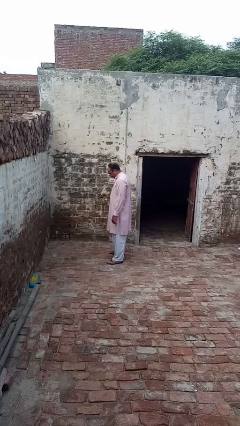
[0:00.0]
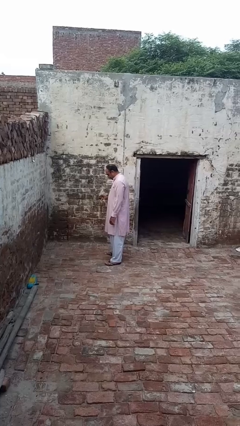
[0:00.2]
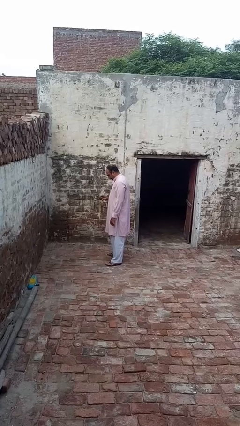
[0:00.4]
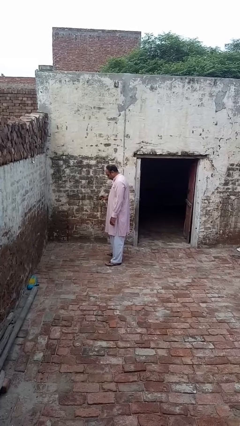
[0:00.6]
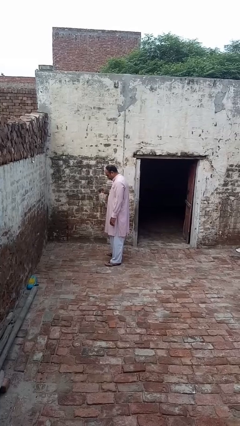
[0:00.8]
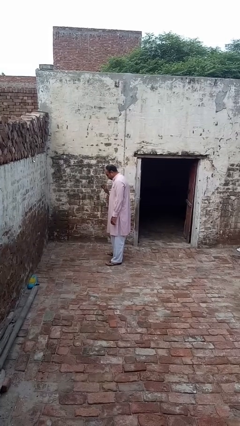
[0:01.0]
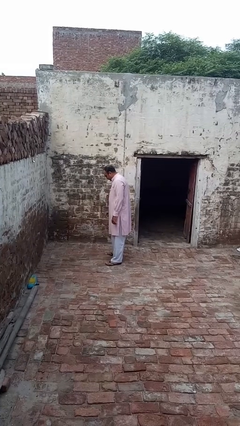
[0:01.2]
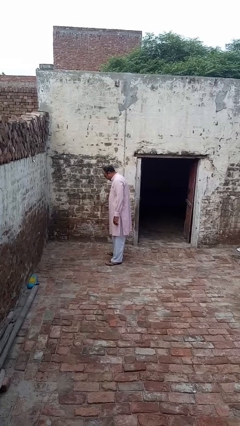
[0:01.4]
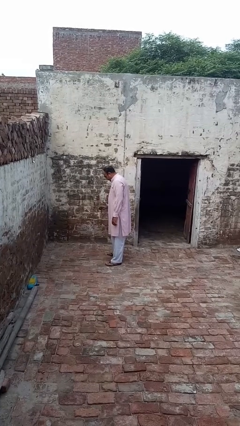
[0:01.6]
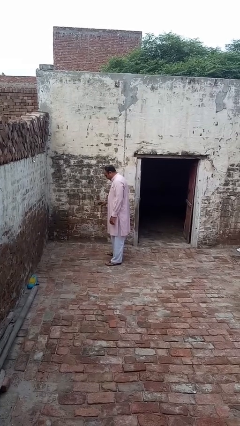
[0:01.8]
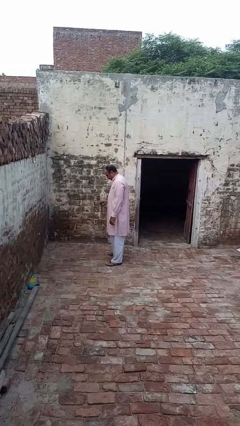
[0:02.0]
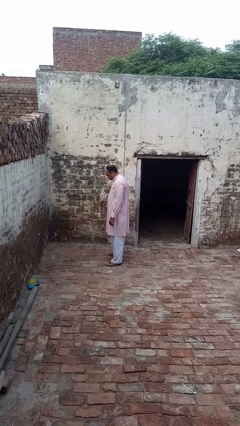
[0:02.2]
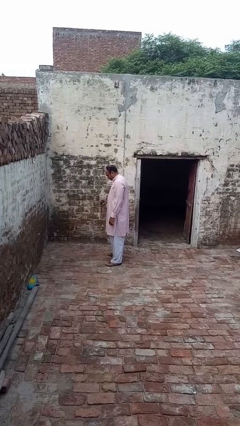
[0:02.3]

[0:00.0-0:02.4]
person bounces ball on floor

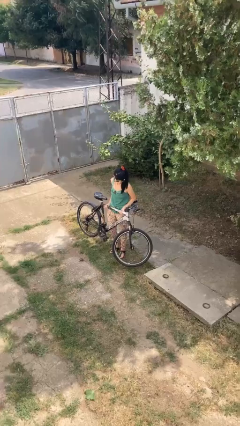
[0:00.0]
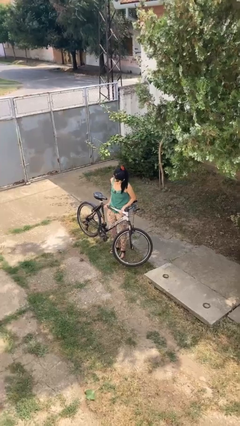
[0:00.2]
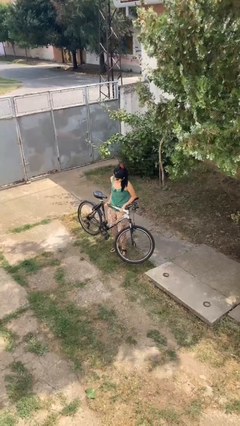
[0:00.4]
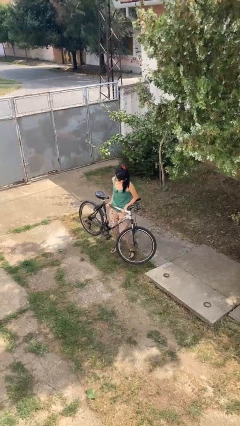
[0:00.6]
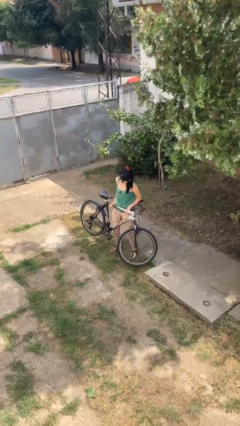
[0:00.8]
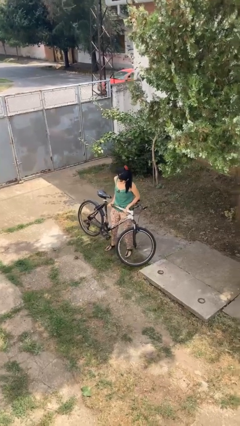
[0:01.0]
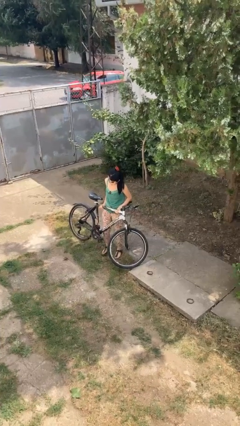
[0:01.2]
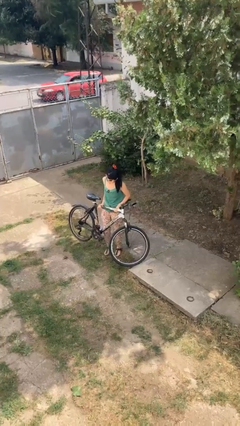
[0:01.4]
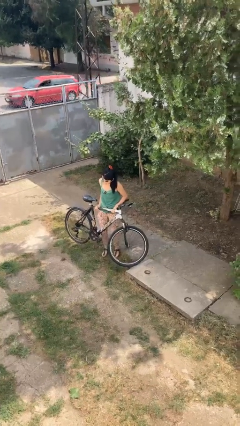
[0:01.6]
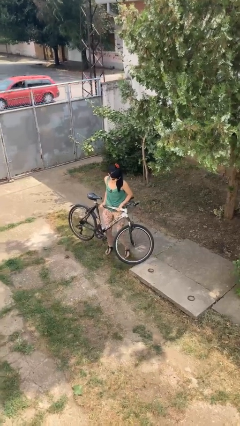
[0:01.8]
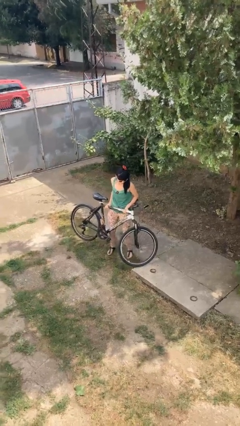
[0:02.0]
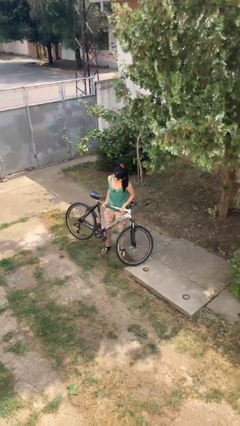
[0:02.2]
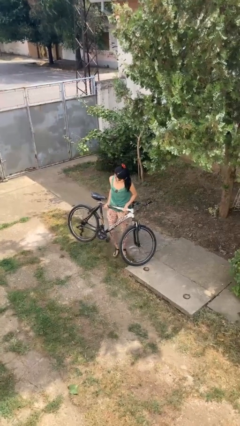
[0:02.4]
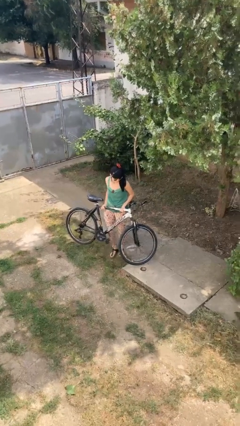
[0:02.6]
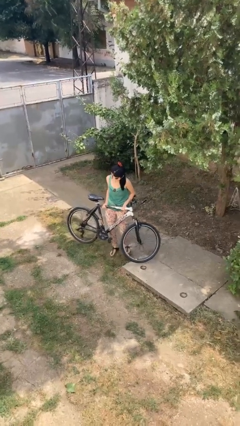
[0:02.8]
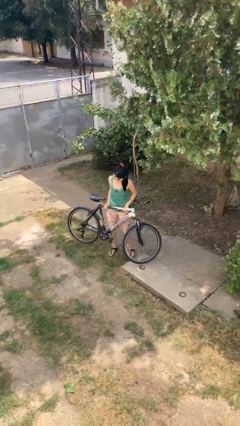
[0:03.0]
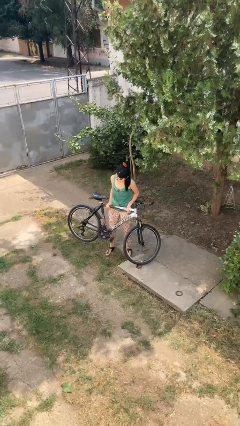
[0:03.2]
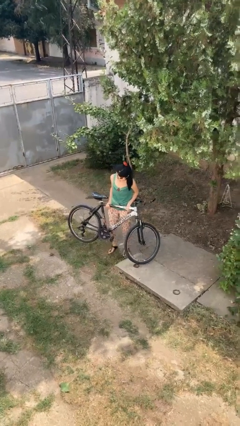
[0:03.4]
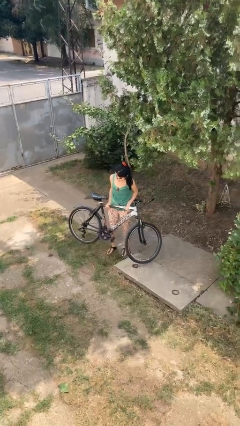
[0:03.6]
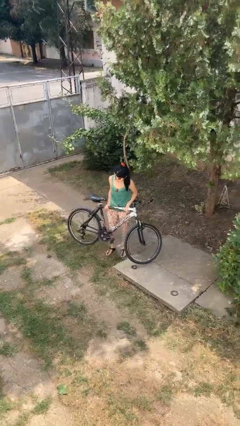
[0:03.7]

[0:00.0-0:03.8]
person carries bicycle

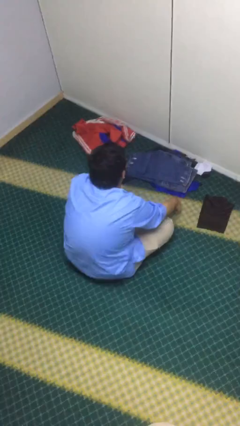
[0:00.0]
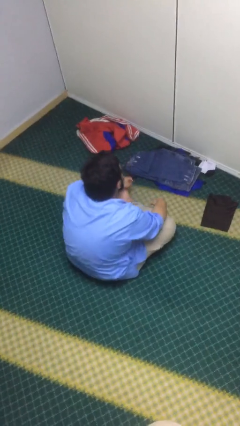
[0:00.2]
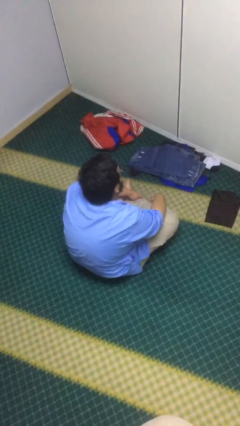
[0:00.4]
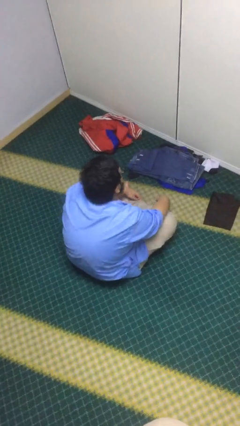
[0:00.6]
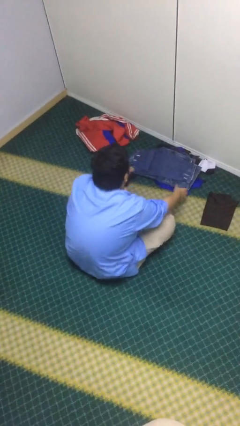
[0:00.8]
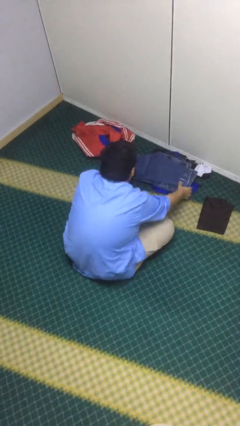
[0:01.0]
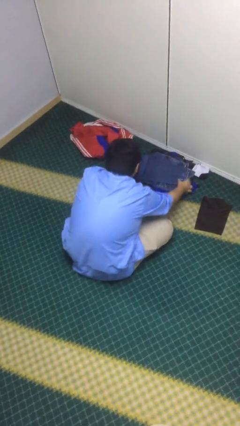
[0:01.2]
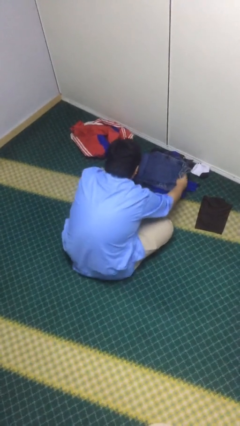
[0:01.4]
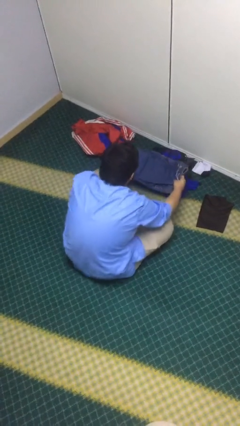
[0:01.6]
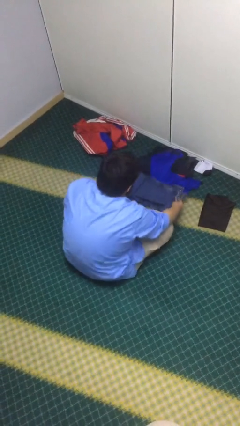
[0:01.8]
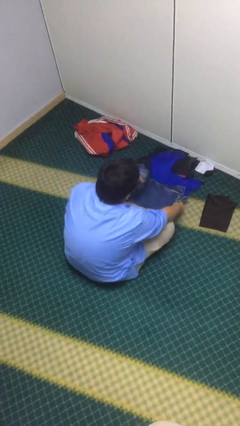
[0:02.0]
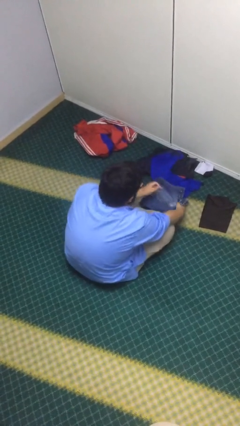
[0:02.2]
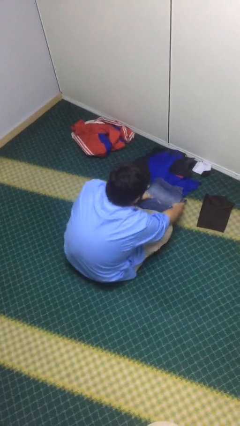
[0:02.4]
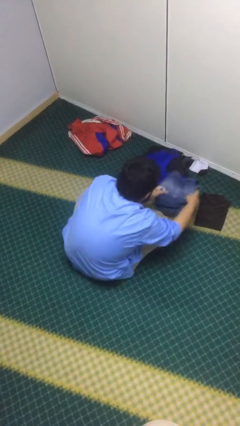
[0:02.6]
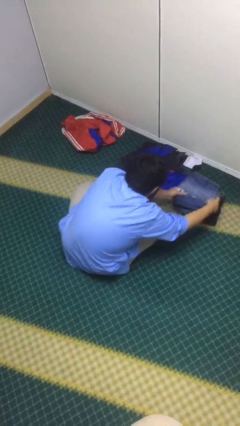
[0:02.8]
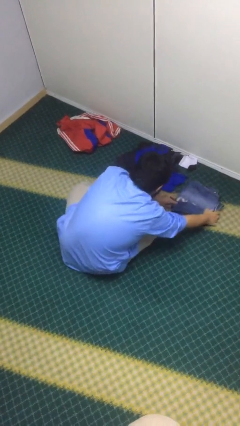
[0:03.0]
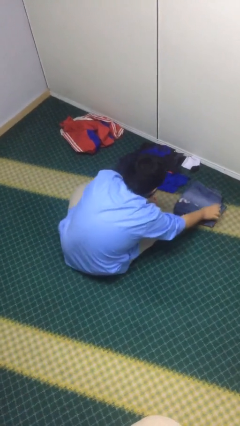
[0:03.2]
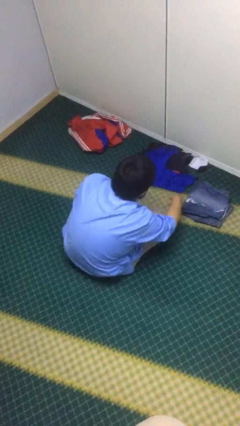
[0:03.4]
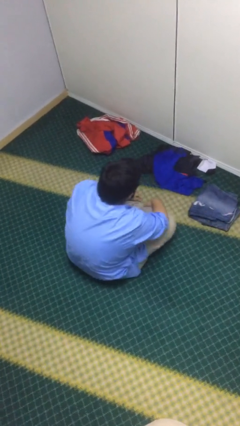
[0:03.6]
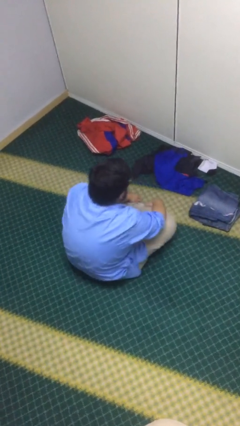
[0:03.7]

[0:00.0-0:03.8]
person folds pants

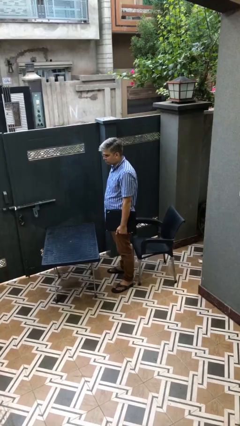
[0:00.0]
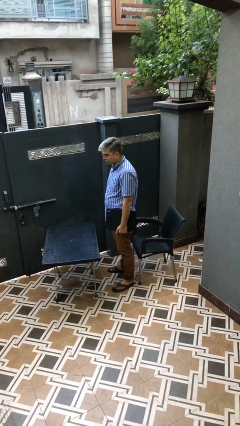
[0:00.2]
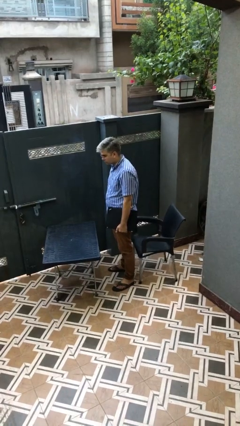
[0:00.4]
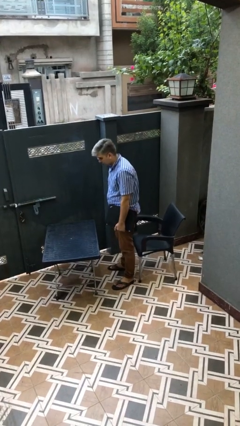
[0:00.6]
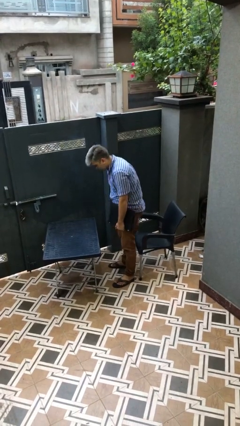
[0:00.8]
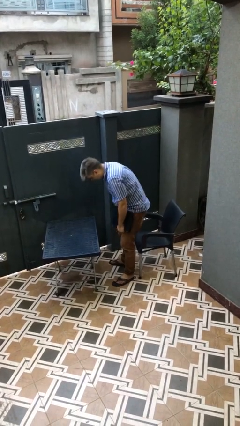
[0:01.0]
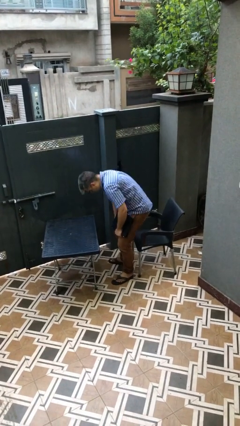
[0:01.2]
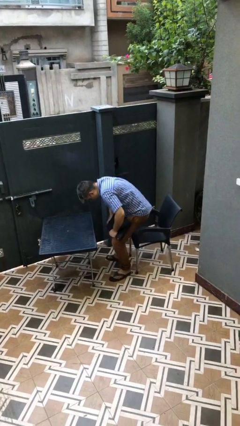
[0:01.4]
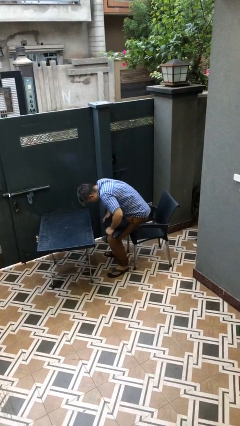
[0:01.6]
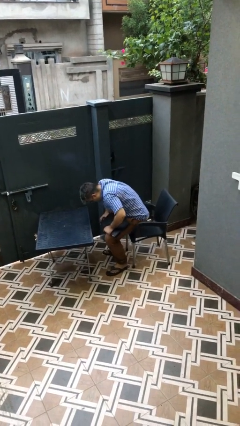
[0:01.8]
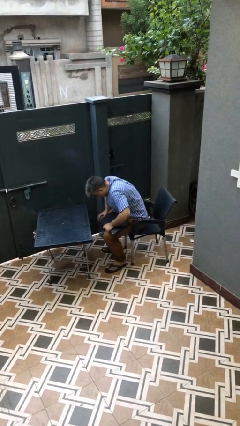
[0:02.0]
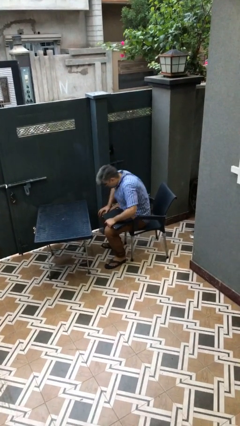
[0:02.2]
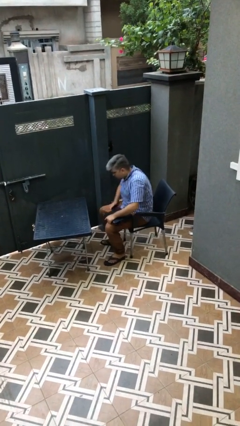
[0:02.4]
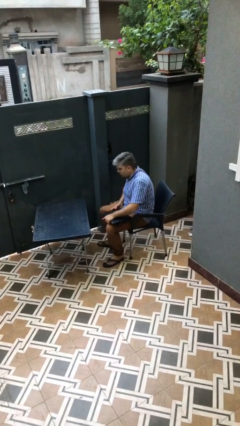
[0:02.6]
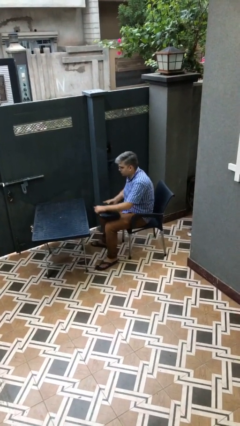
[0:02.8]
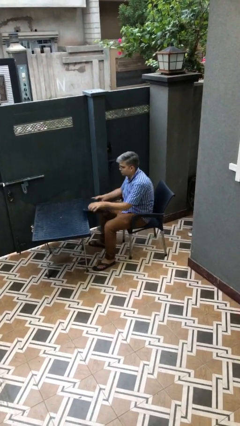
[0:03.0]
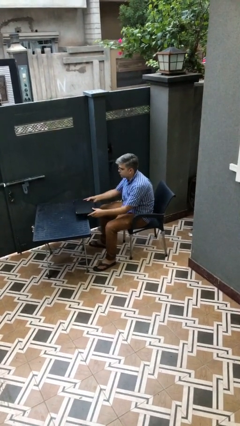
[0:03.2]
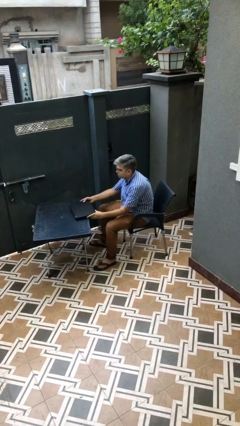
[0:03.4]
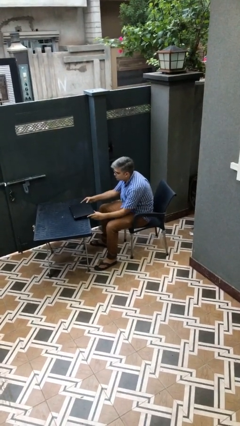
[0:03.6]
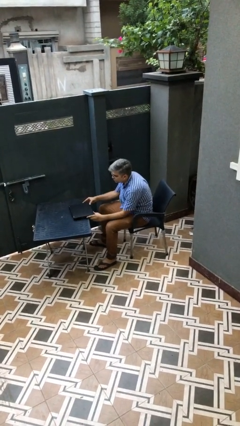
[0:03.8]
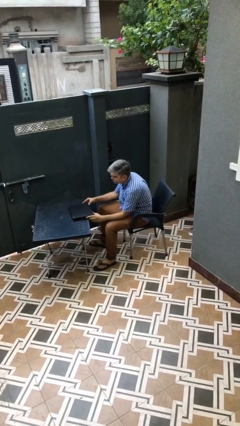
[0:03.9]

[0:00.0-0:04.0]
person sits down

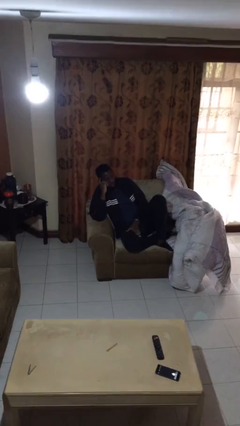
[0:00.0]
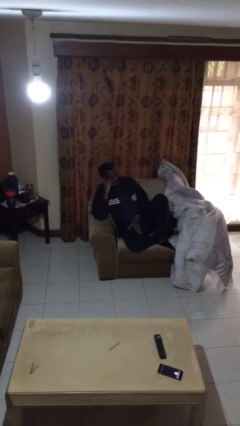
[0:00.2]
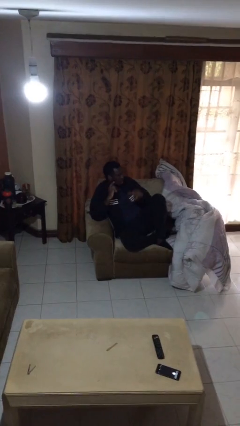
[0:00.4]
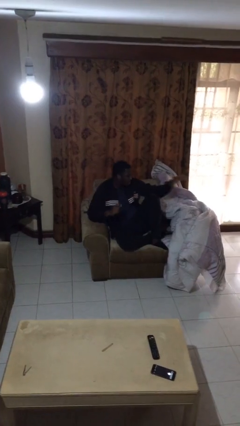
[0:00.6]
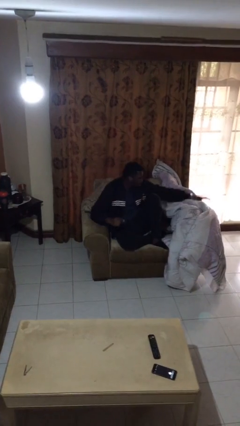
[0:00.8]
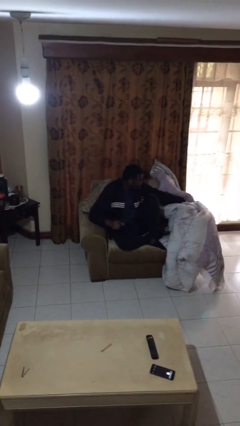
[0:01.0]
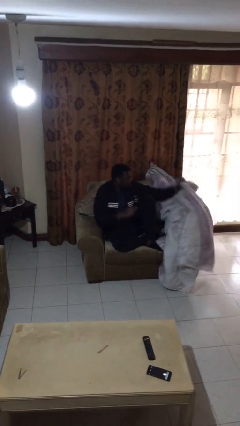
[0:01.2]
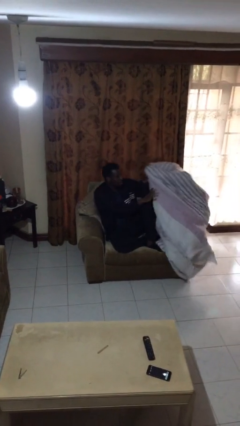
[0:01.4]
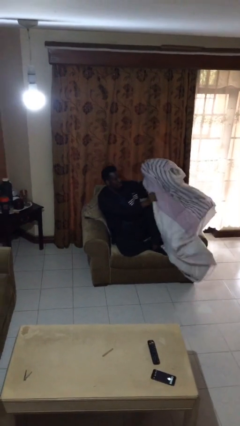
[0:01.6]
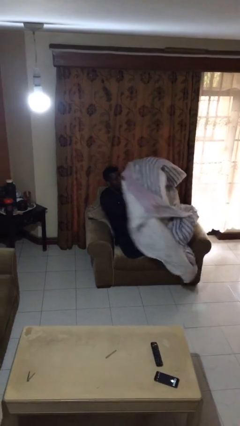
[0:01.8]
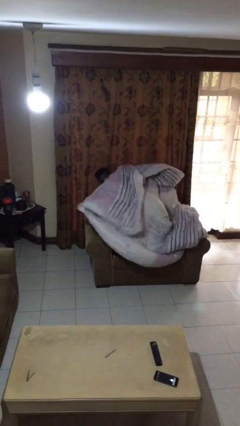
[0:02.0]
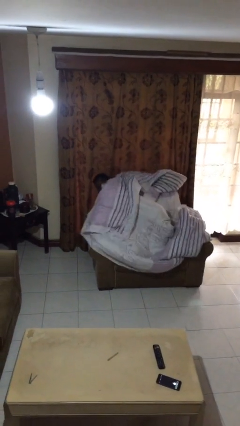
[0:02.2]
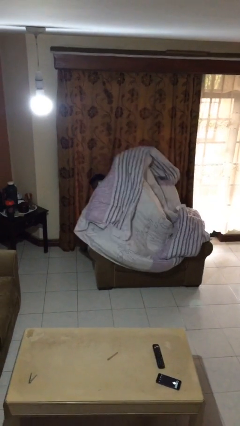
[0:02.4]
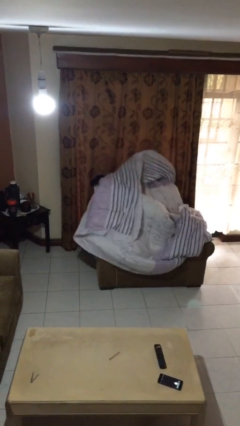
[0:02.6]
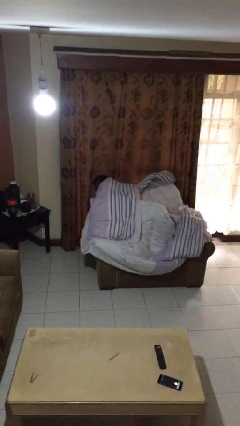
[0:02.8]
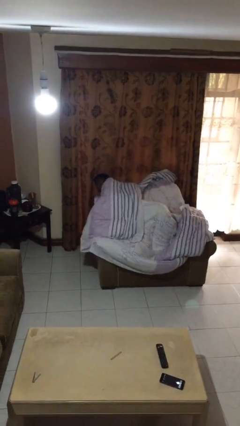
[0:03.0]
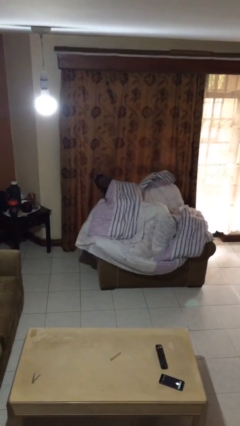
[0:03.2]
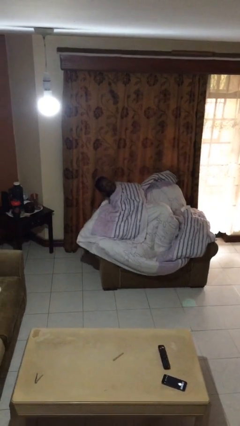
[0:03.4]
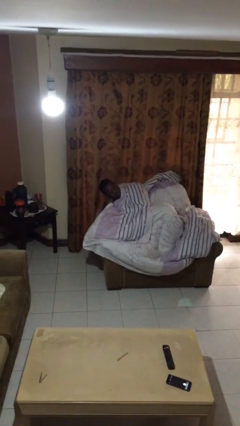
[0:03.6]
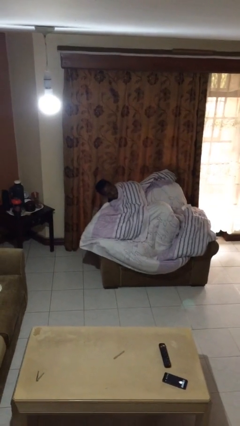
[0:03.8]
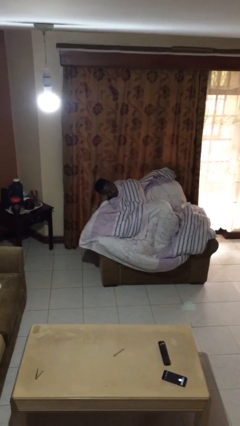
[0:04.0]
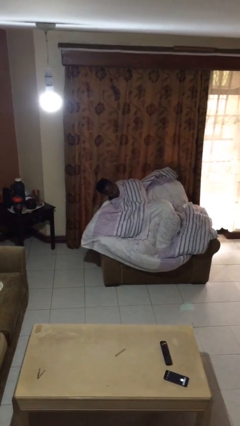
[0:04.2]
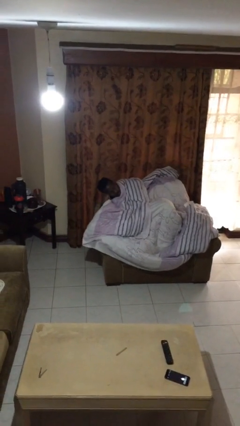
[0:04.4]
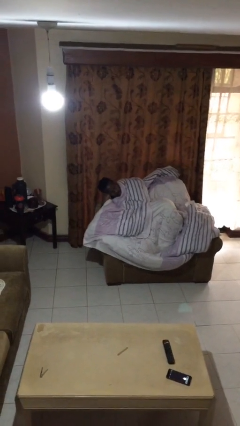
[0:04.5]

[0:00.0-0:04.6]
person covers with blanket
